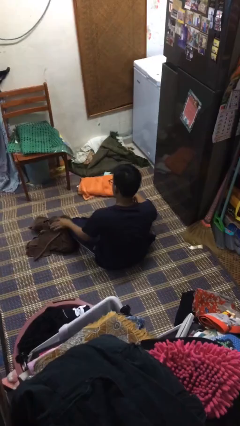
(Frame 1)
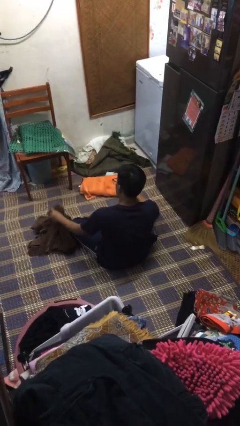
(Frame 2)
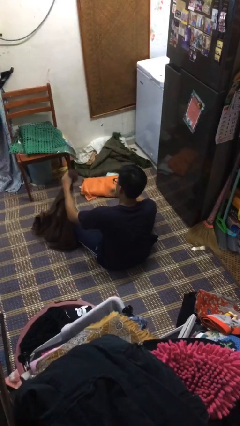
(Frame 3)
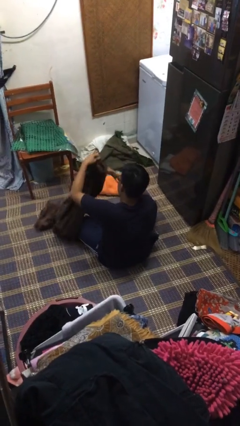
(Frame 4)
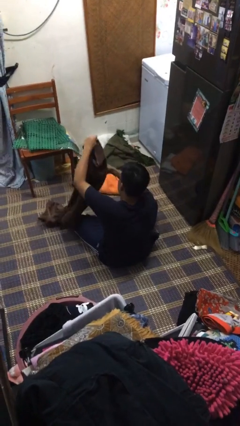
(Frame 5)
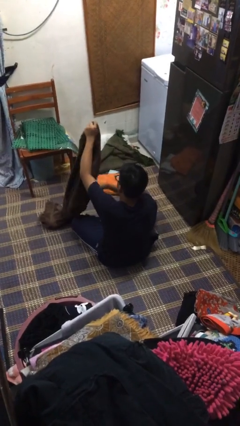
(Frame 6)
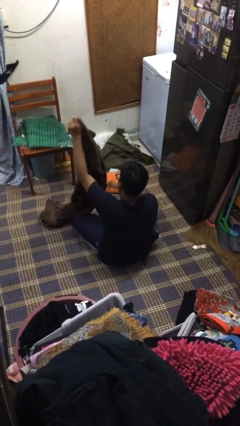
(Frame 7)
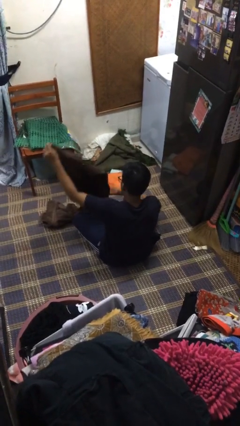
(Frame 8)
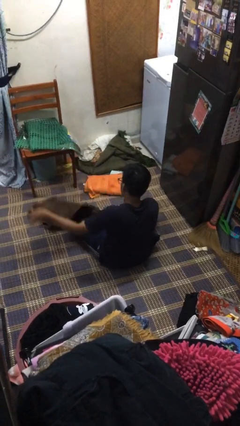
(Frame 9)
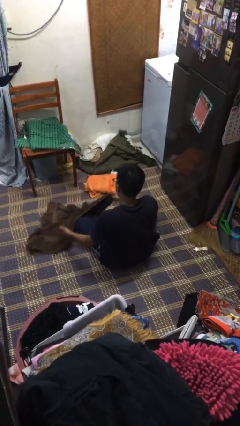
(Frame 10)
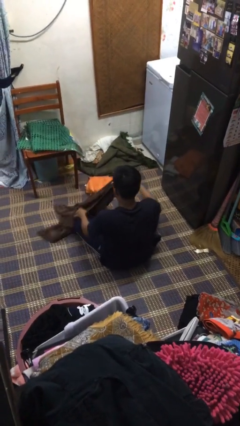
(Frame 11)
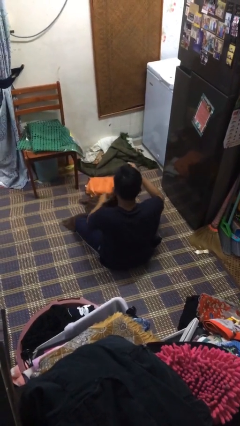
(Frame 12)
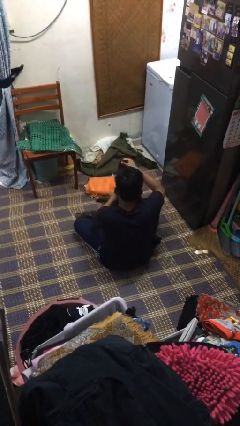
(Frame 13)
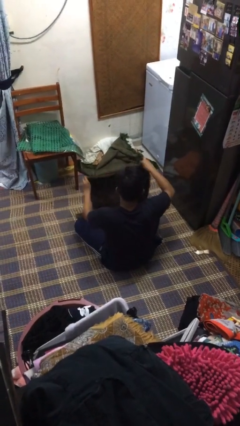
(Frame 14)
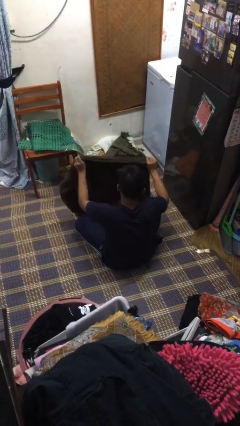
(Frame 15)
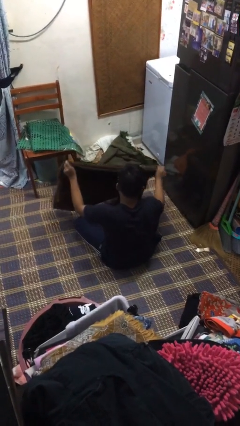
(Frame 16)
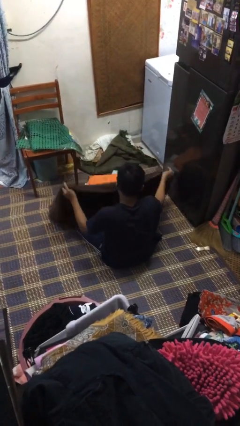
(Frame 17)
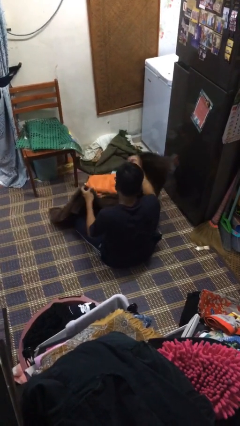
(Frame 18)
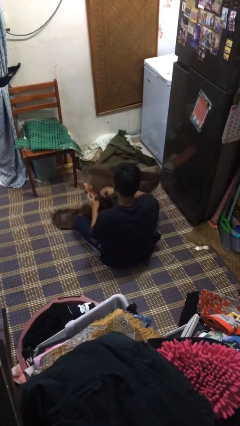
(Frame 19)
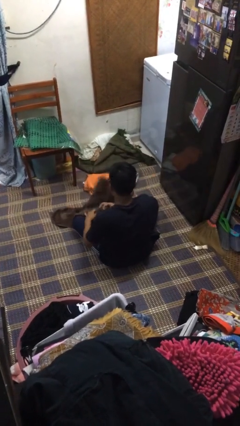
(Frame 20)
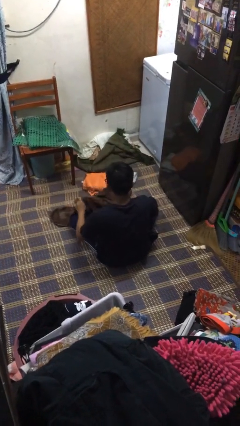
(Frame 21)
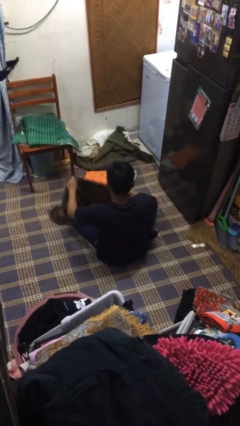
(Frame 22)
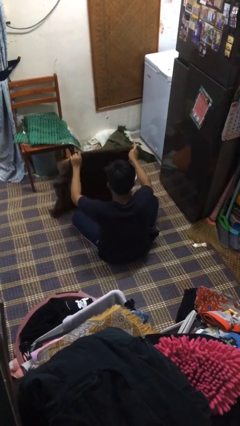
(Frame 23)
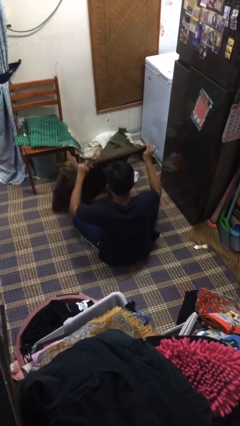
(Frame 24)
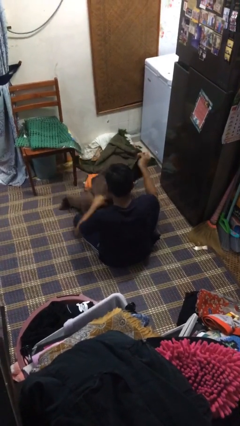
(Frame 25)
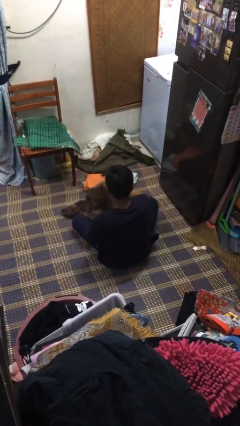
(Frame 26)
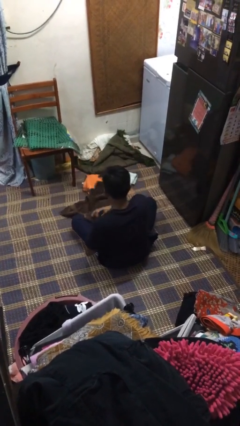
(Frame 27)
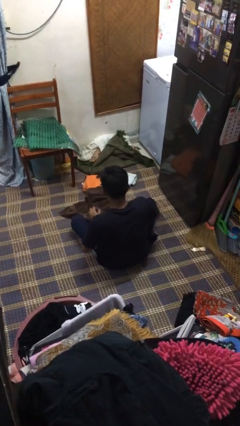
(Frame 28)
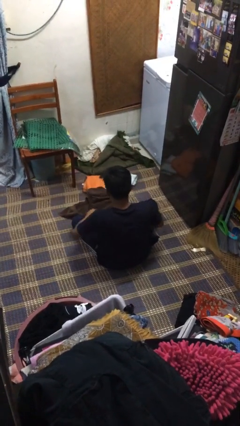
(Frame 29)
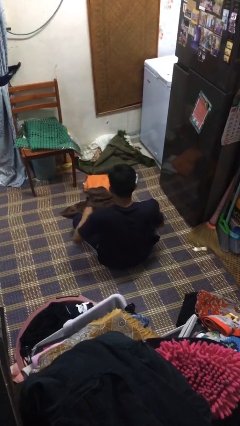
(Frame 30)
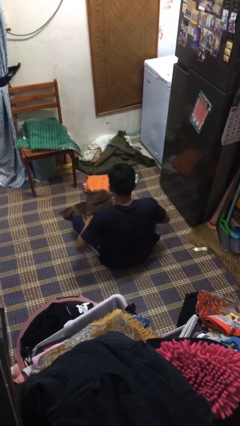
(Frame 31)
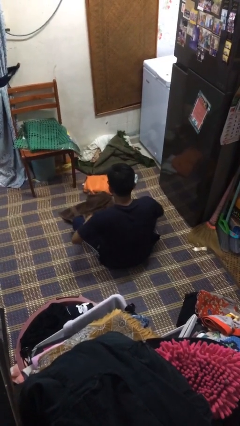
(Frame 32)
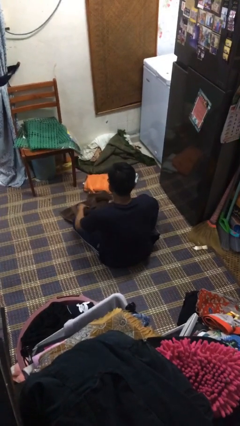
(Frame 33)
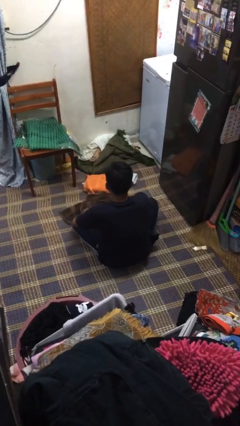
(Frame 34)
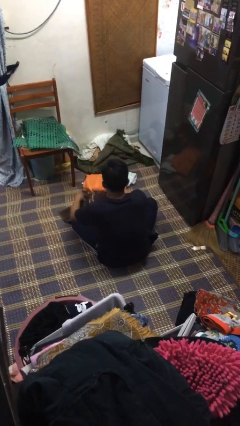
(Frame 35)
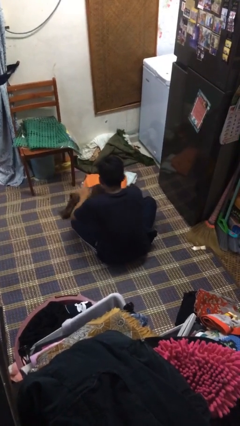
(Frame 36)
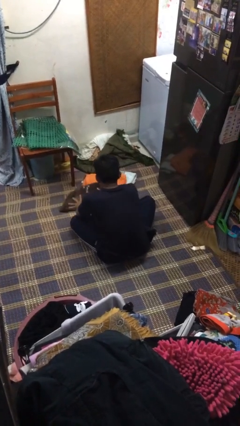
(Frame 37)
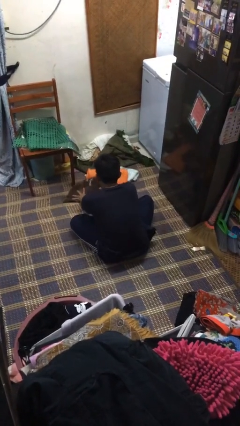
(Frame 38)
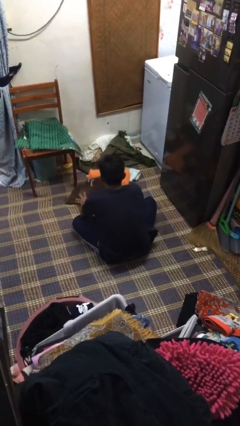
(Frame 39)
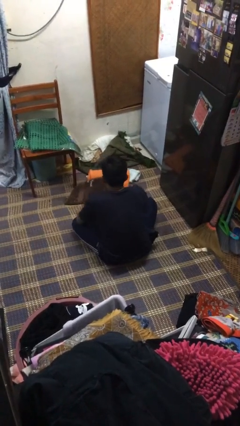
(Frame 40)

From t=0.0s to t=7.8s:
person folds towel

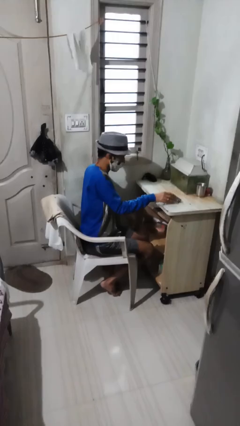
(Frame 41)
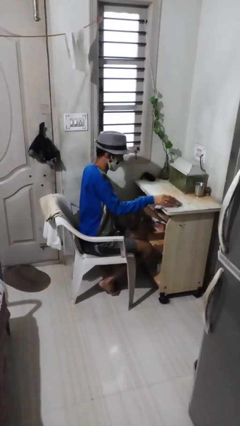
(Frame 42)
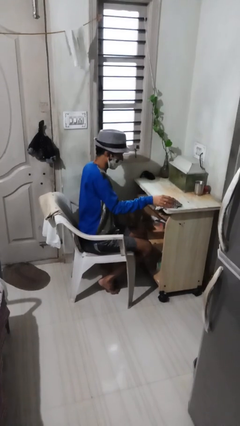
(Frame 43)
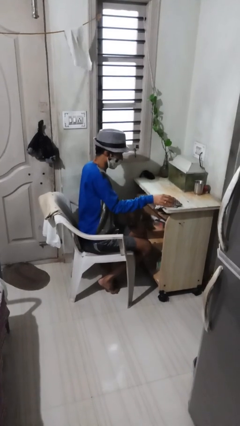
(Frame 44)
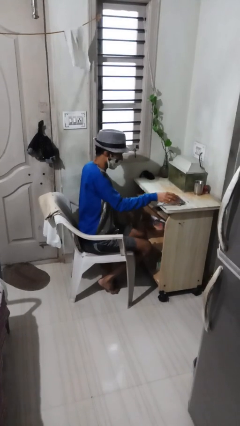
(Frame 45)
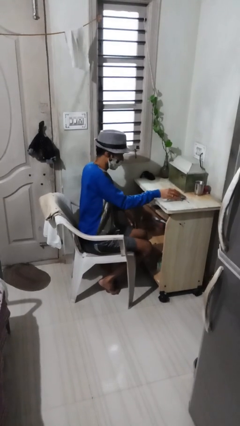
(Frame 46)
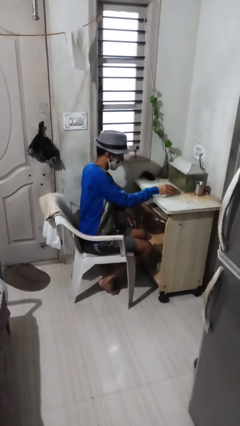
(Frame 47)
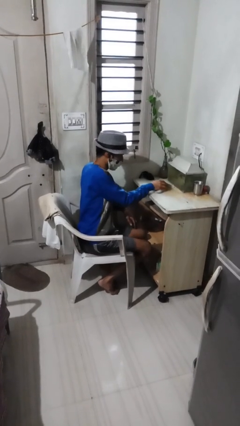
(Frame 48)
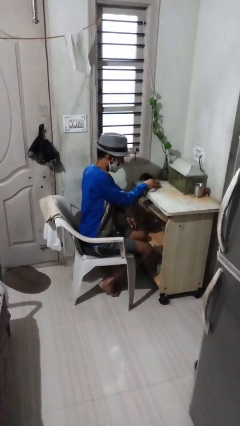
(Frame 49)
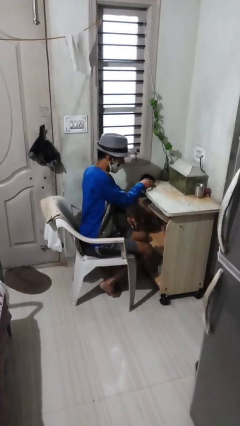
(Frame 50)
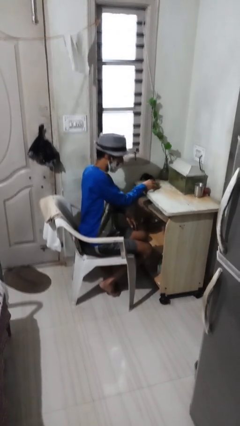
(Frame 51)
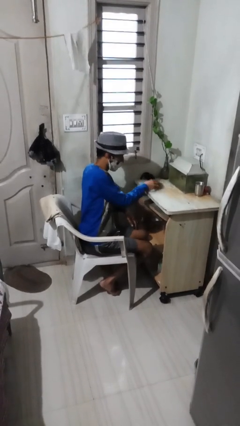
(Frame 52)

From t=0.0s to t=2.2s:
person cleans table with rag

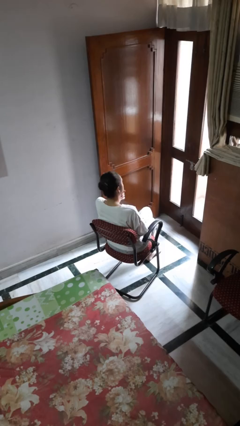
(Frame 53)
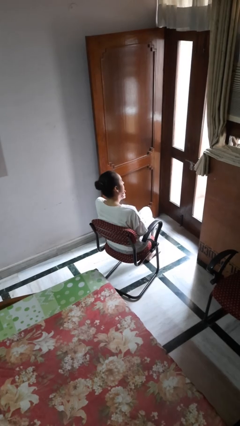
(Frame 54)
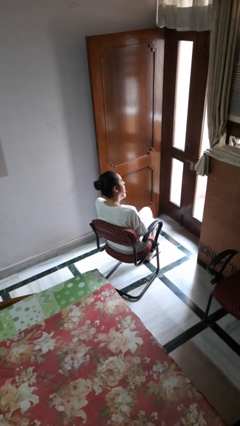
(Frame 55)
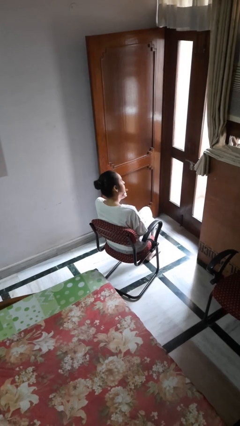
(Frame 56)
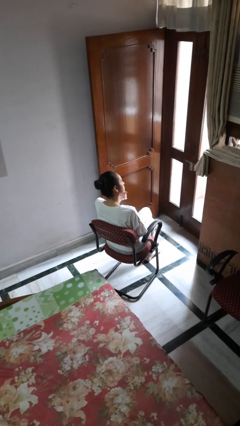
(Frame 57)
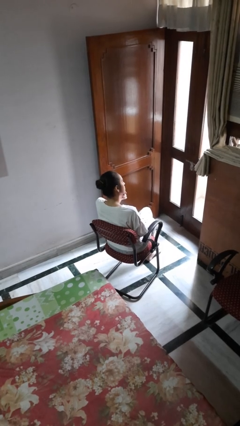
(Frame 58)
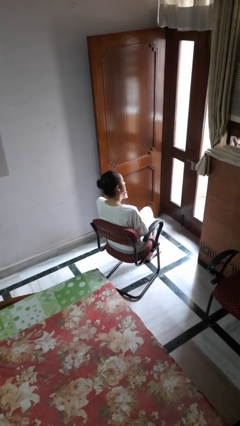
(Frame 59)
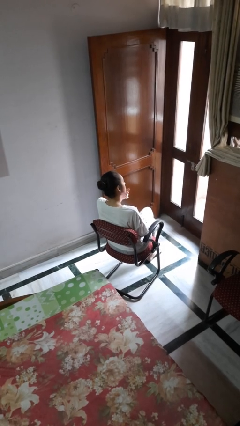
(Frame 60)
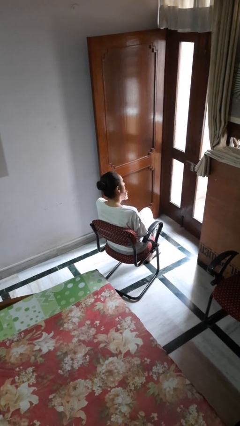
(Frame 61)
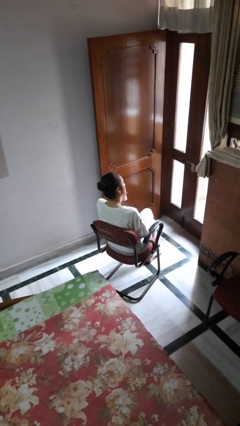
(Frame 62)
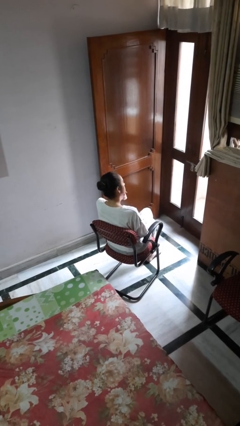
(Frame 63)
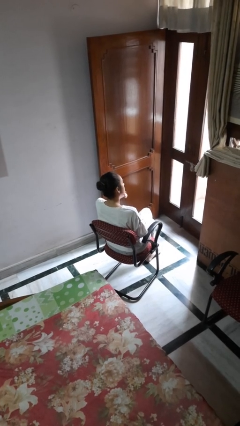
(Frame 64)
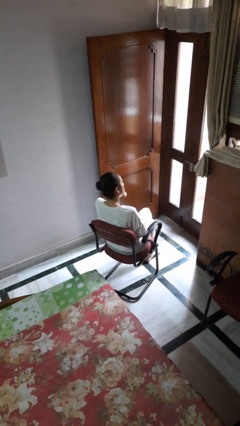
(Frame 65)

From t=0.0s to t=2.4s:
person strokes chin

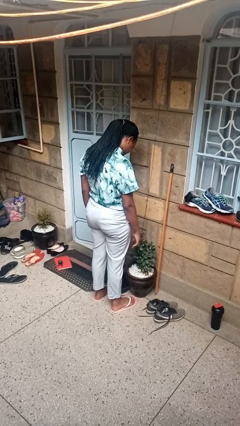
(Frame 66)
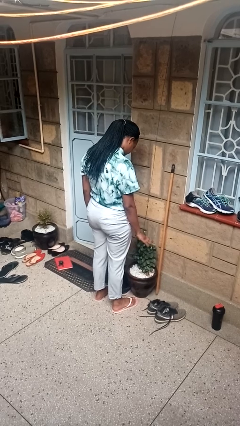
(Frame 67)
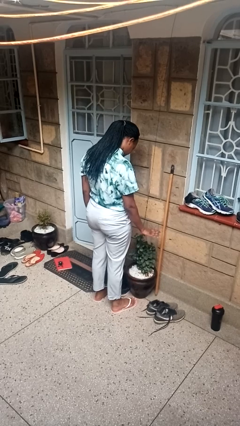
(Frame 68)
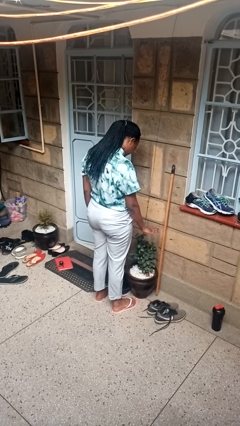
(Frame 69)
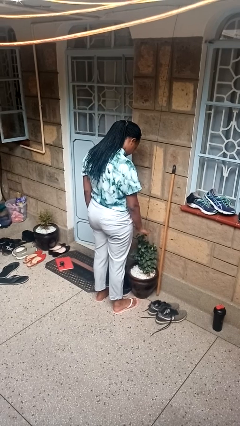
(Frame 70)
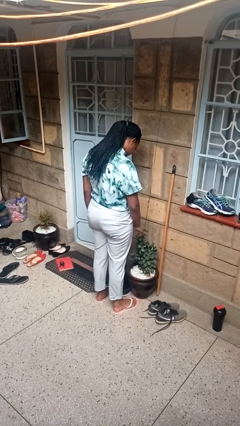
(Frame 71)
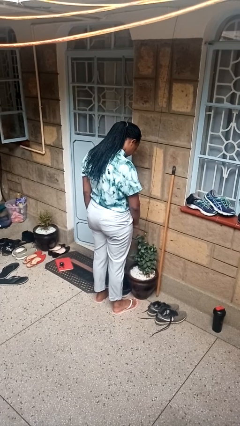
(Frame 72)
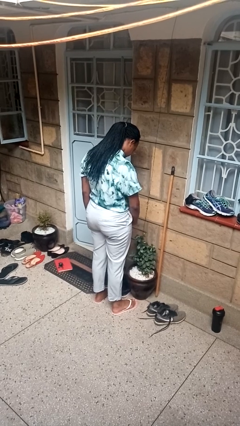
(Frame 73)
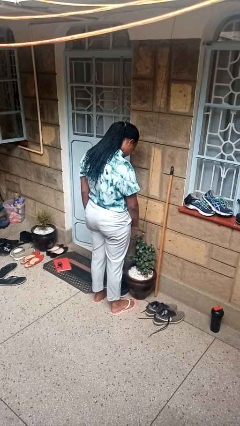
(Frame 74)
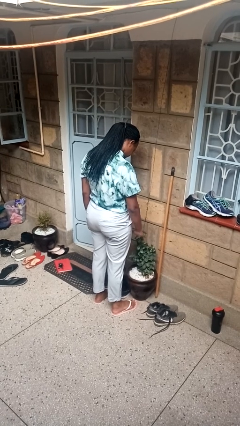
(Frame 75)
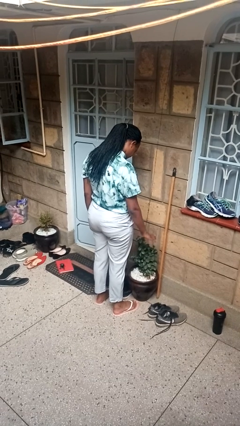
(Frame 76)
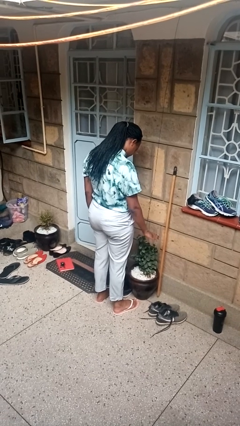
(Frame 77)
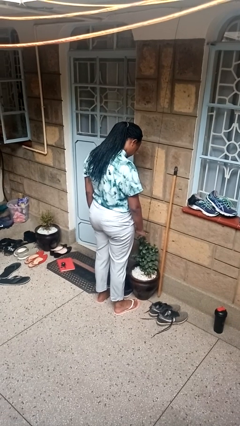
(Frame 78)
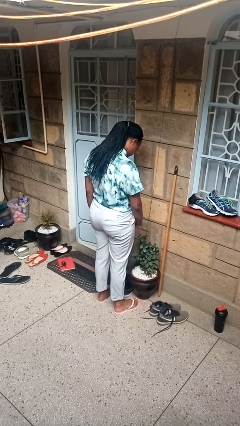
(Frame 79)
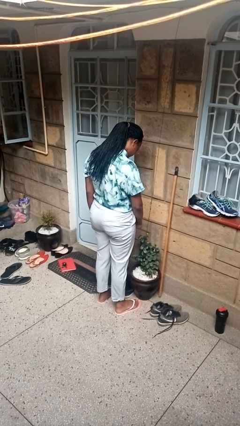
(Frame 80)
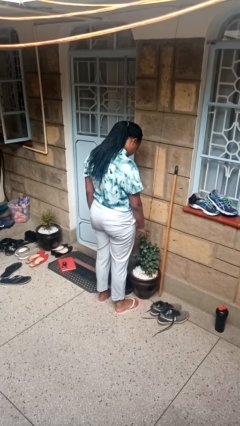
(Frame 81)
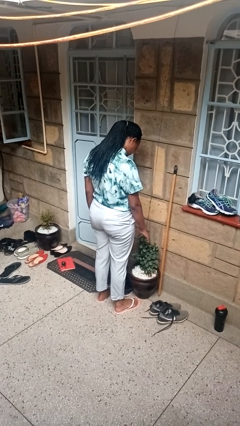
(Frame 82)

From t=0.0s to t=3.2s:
person waves hand over object

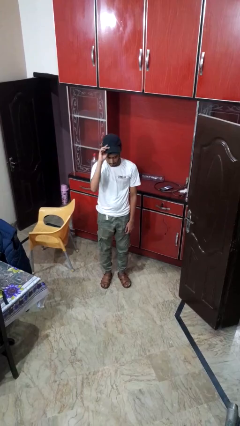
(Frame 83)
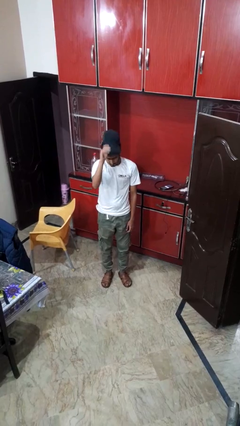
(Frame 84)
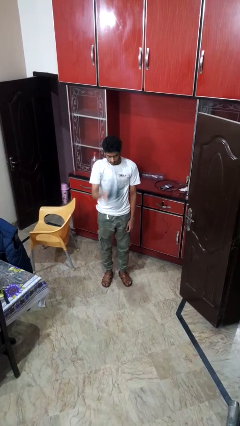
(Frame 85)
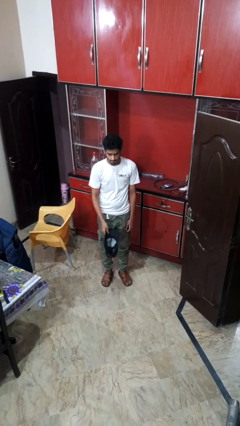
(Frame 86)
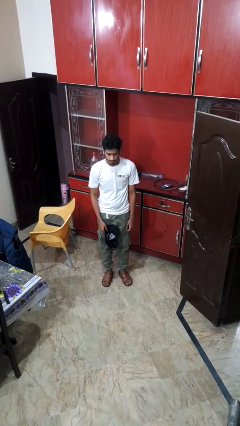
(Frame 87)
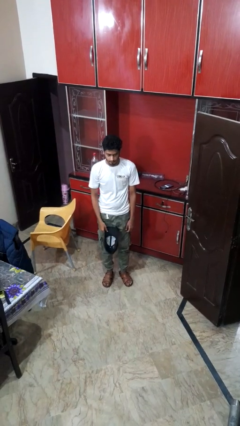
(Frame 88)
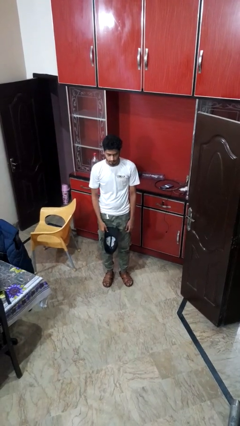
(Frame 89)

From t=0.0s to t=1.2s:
person takes off hat

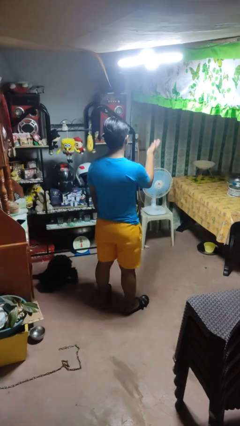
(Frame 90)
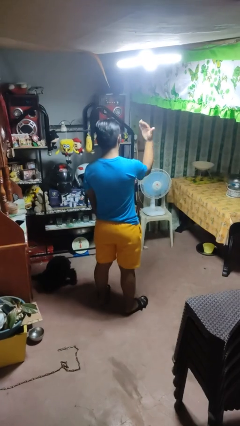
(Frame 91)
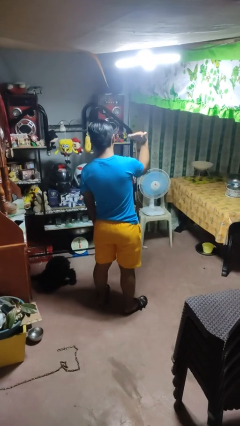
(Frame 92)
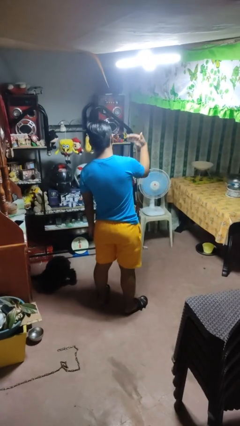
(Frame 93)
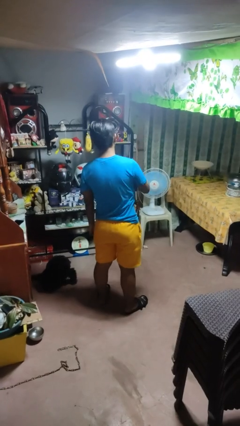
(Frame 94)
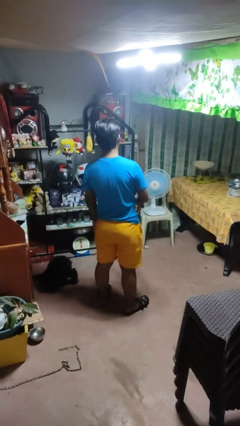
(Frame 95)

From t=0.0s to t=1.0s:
person gestures come here
